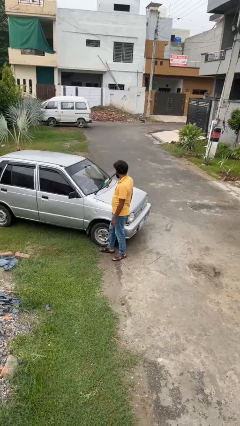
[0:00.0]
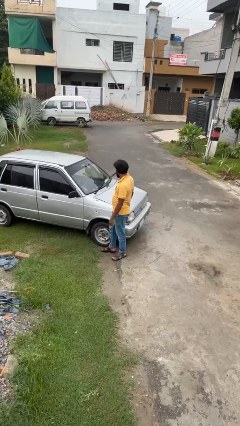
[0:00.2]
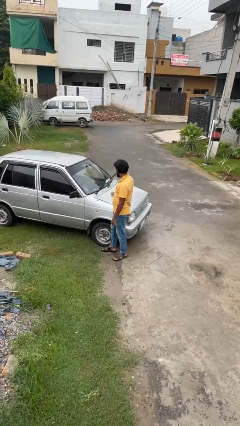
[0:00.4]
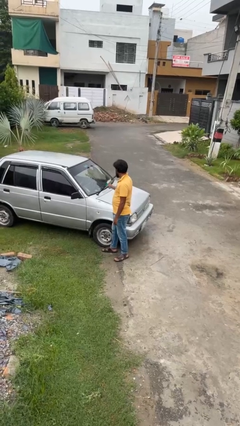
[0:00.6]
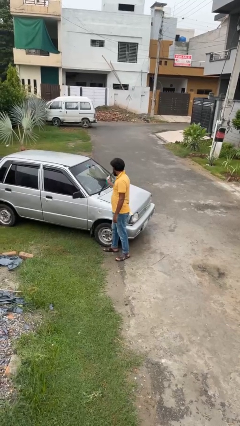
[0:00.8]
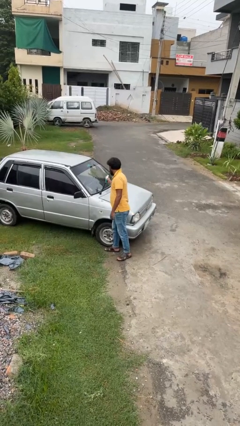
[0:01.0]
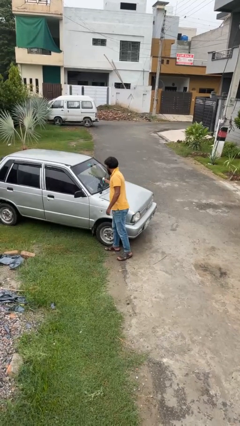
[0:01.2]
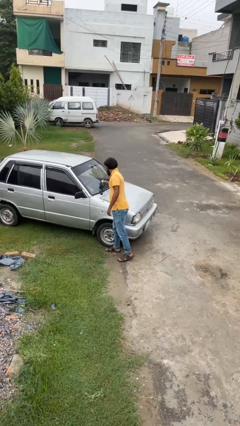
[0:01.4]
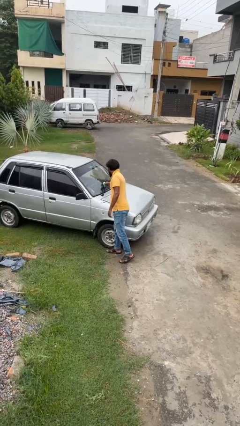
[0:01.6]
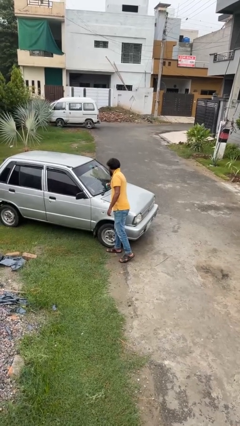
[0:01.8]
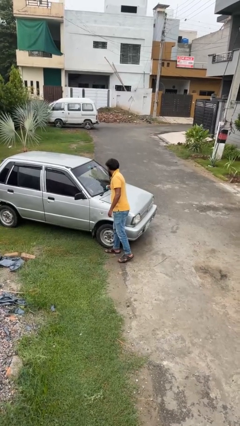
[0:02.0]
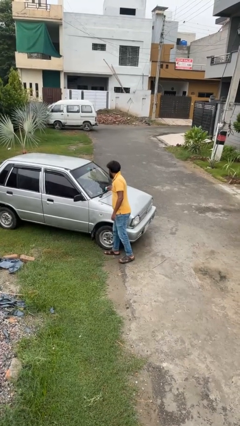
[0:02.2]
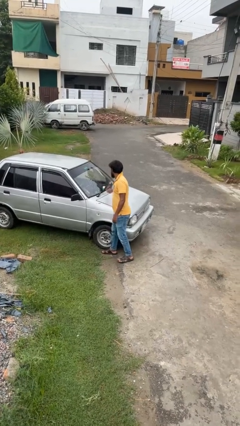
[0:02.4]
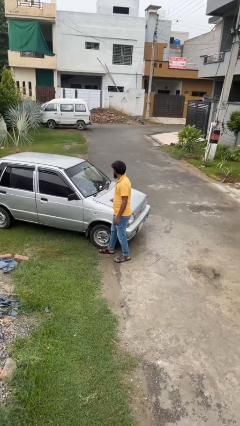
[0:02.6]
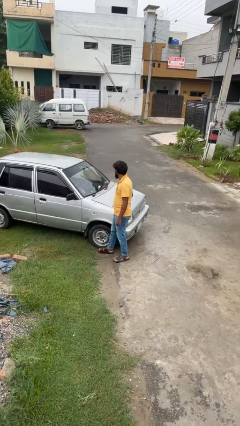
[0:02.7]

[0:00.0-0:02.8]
person flips down car wipers

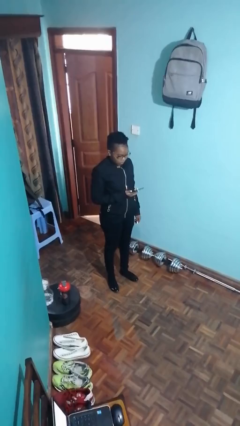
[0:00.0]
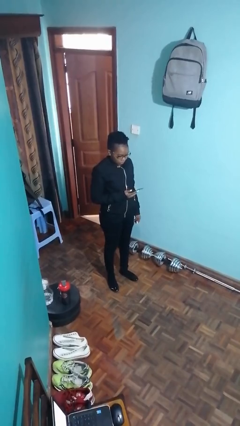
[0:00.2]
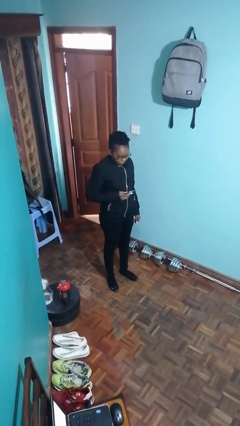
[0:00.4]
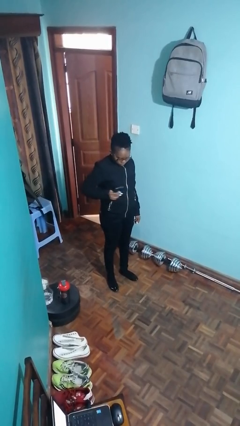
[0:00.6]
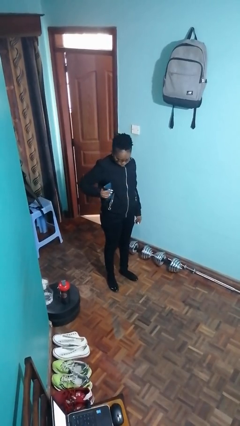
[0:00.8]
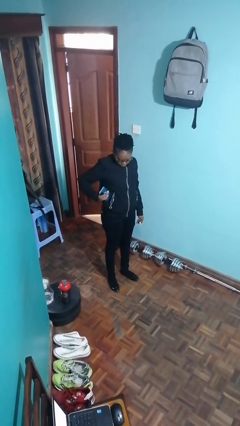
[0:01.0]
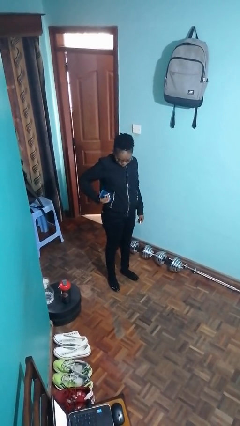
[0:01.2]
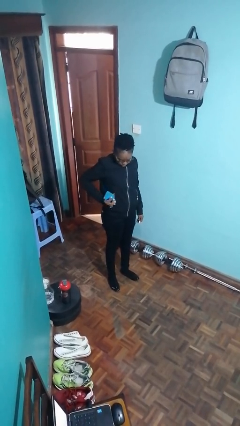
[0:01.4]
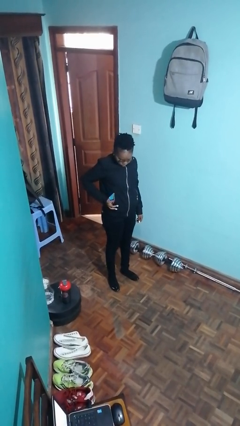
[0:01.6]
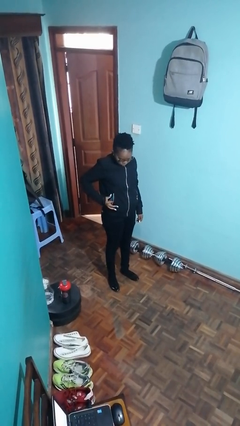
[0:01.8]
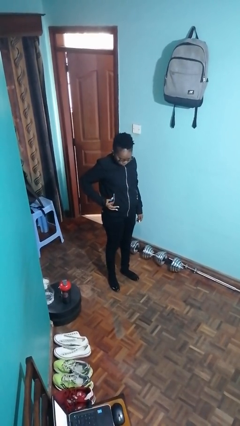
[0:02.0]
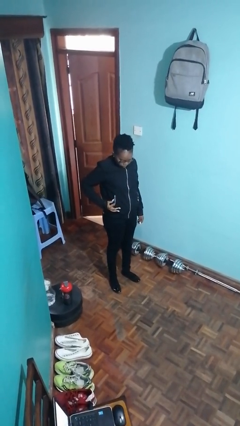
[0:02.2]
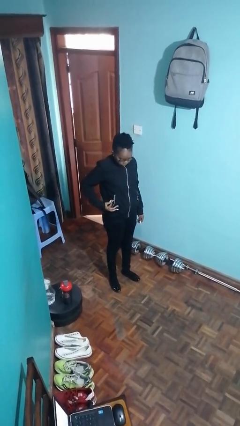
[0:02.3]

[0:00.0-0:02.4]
person puts phone into pocket

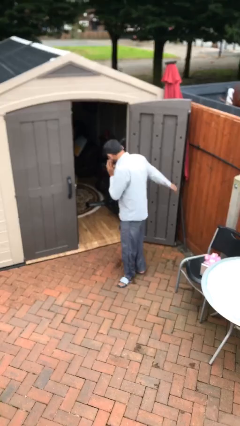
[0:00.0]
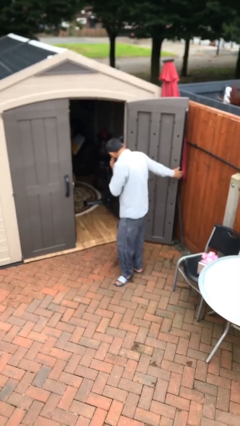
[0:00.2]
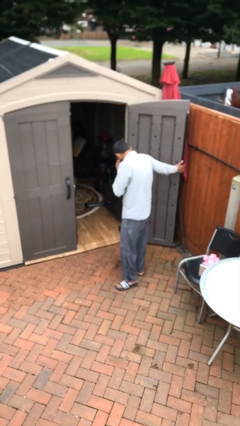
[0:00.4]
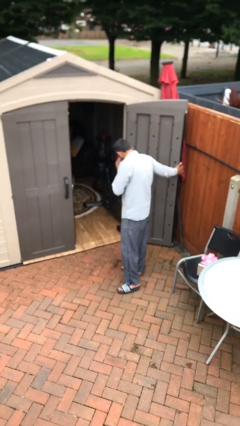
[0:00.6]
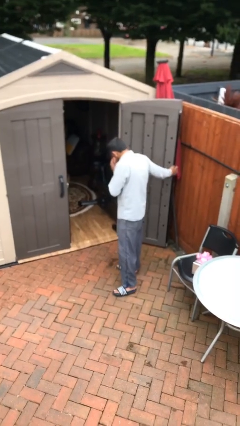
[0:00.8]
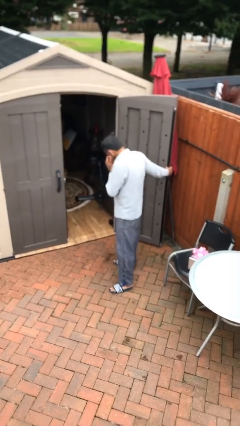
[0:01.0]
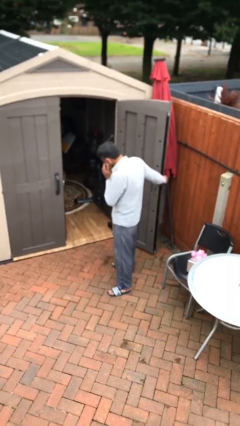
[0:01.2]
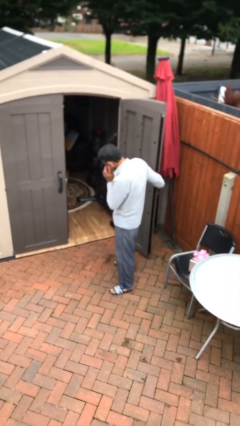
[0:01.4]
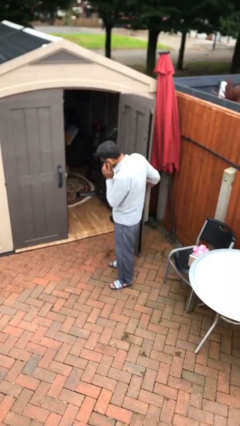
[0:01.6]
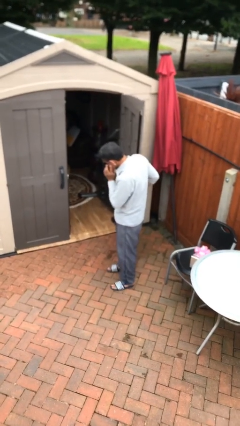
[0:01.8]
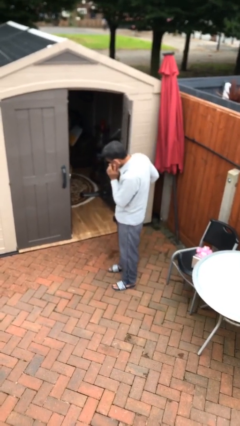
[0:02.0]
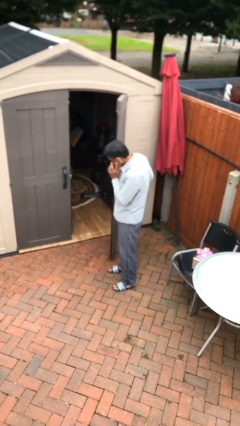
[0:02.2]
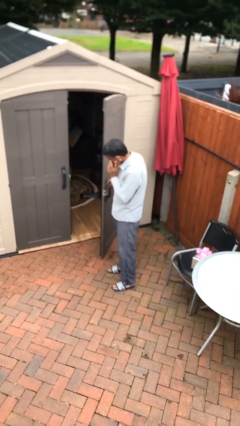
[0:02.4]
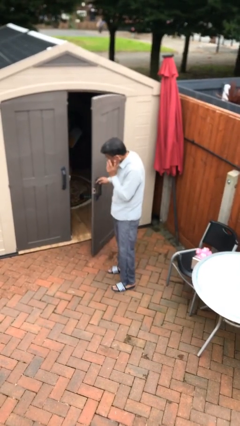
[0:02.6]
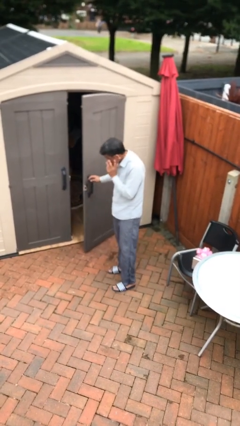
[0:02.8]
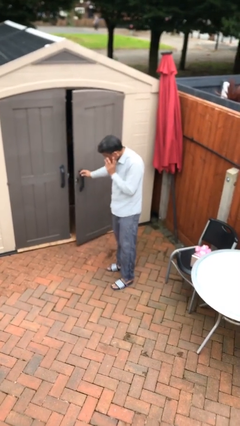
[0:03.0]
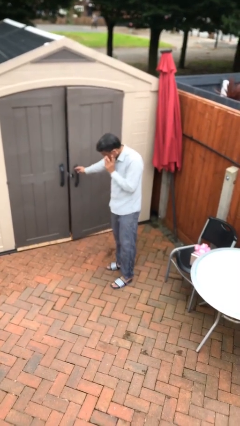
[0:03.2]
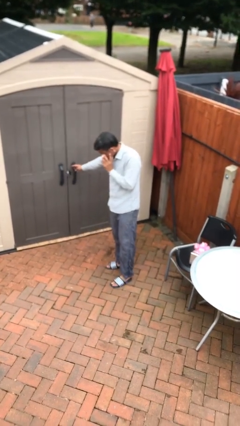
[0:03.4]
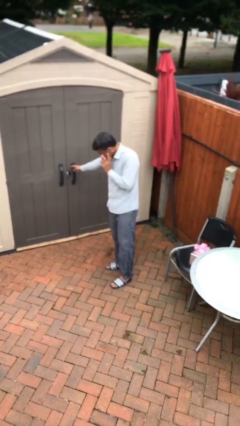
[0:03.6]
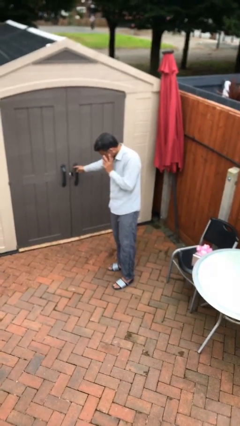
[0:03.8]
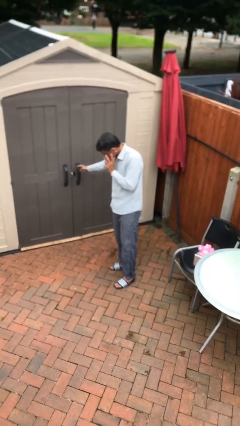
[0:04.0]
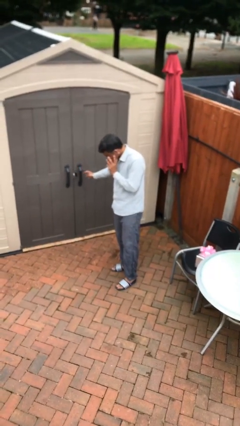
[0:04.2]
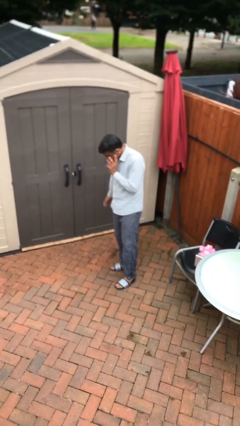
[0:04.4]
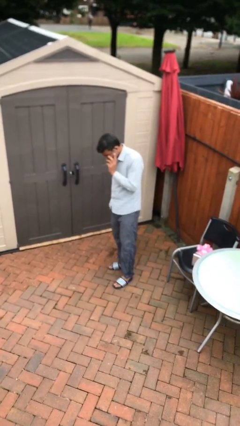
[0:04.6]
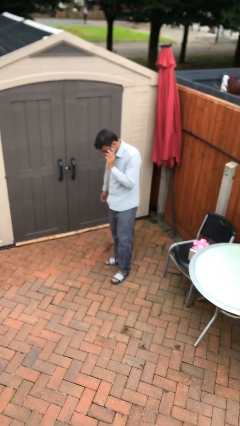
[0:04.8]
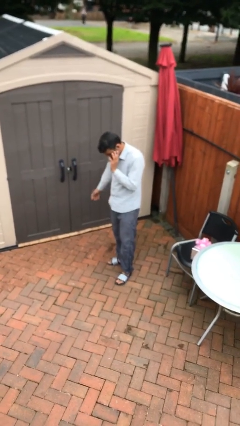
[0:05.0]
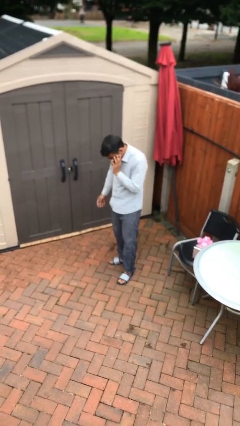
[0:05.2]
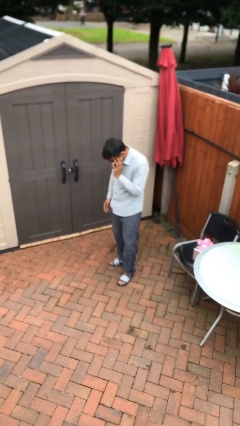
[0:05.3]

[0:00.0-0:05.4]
person closes facility door

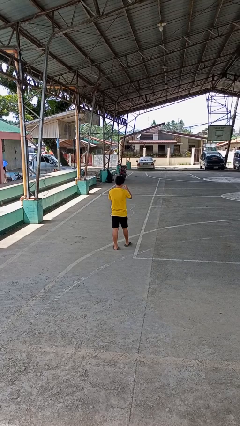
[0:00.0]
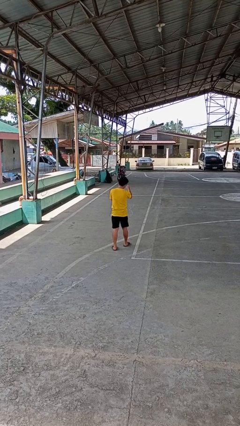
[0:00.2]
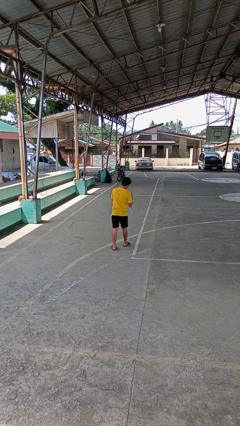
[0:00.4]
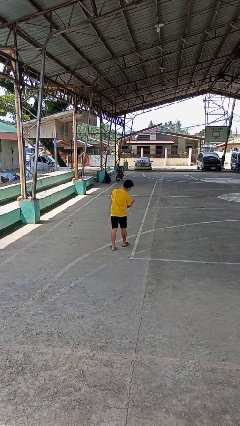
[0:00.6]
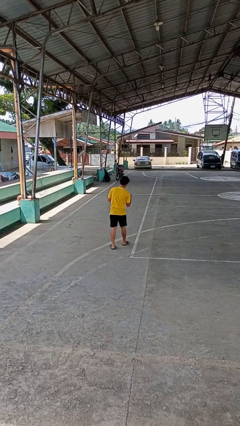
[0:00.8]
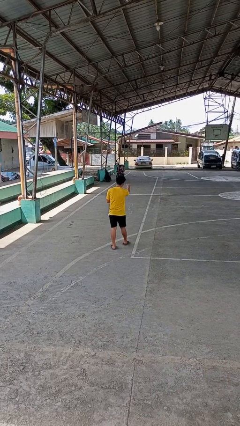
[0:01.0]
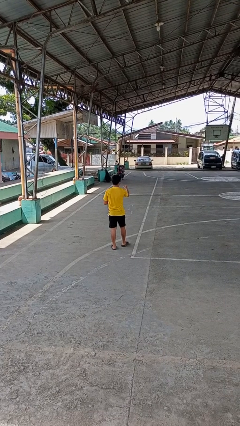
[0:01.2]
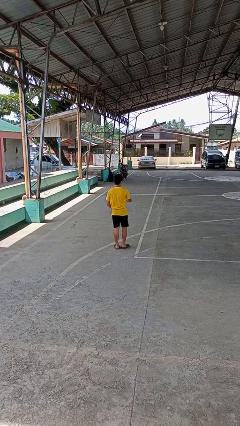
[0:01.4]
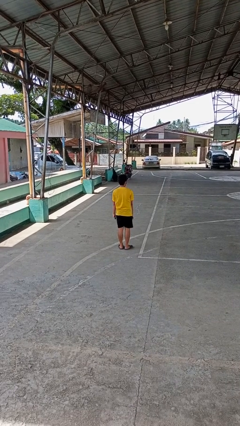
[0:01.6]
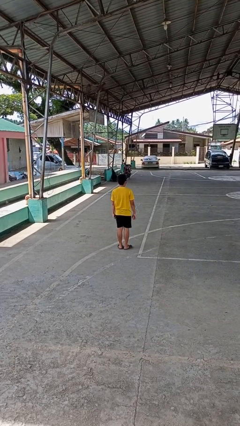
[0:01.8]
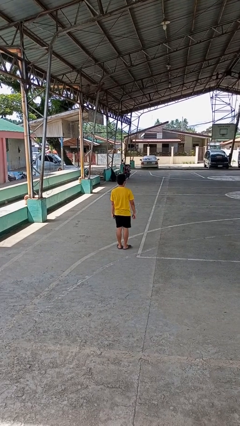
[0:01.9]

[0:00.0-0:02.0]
person punches

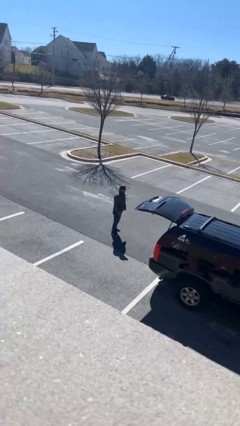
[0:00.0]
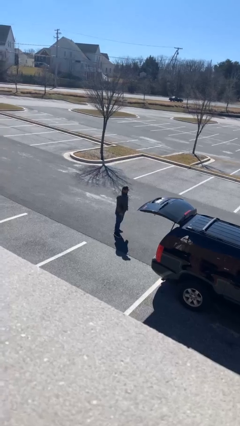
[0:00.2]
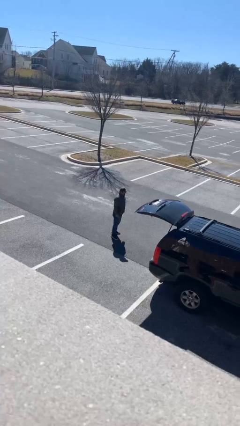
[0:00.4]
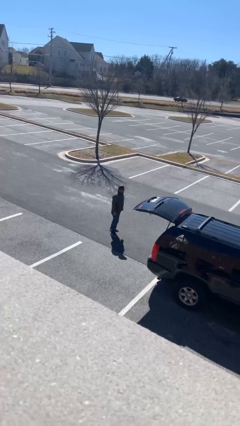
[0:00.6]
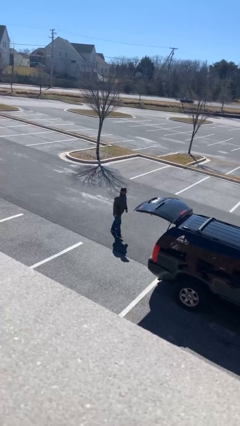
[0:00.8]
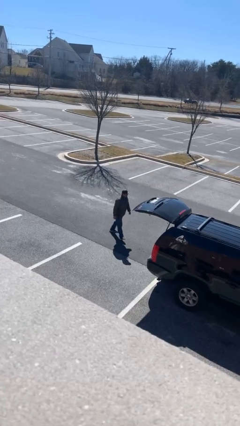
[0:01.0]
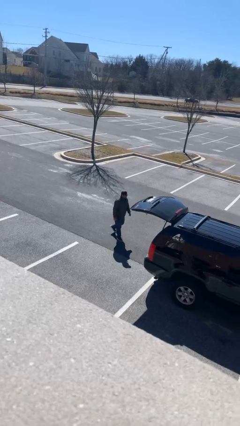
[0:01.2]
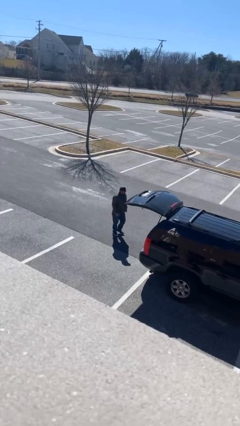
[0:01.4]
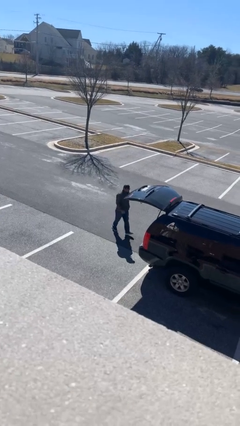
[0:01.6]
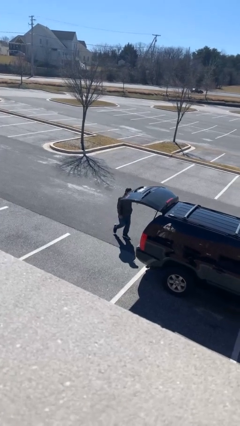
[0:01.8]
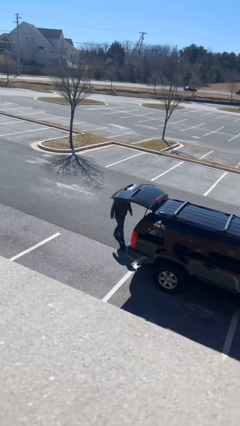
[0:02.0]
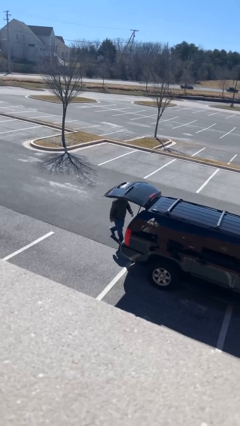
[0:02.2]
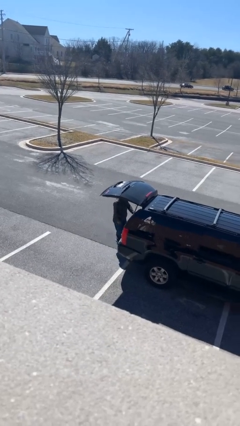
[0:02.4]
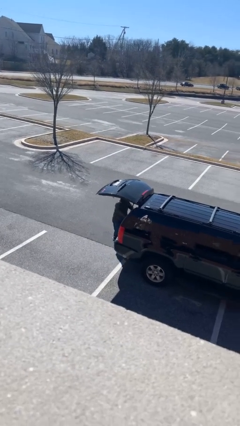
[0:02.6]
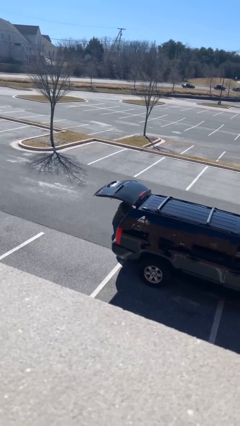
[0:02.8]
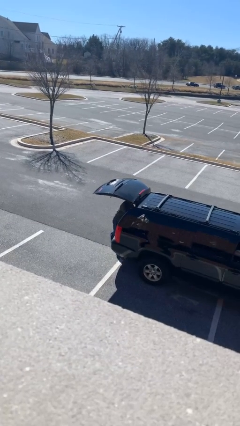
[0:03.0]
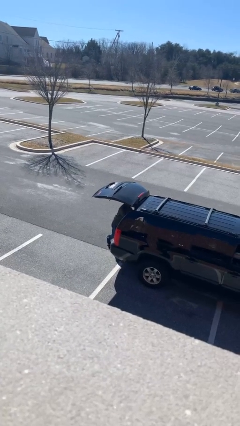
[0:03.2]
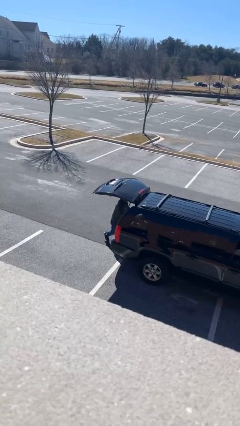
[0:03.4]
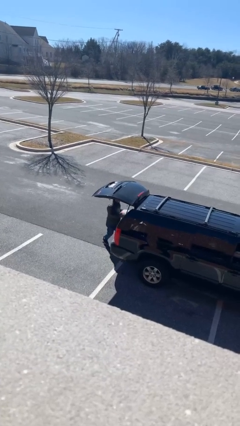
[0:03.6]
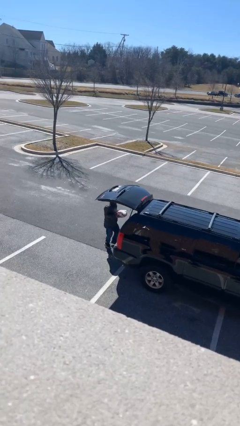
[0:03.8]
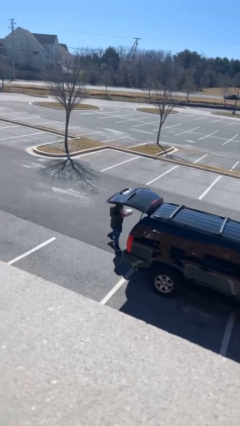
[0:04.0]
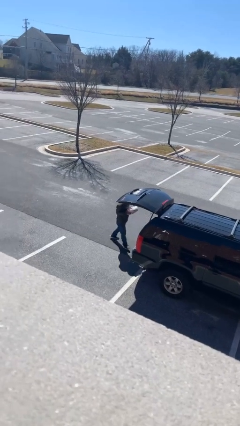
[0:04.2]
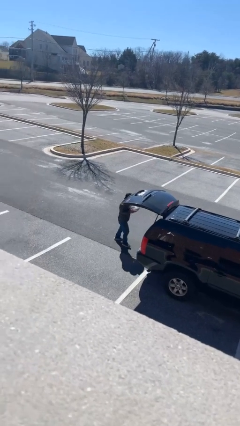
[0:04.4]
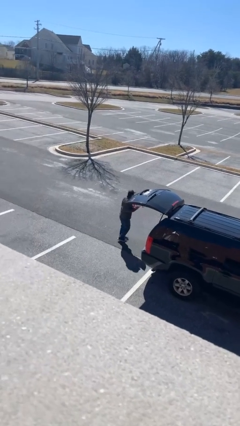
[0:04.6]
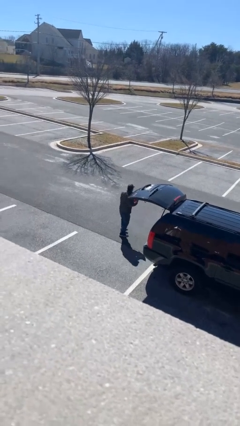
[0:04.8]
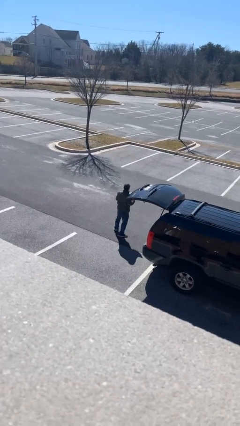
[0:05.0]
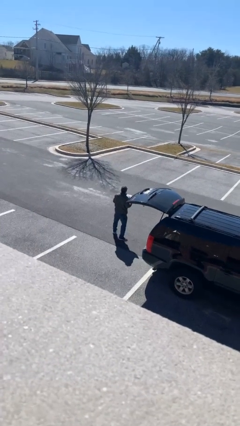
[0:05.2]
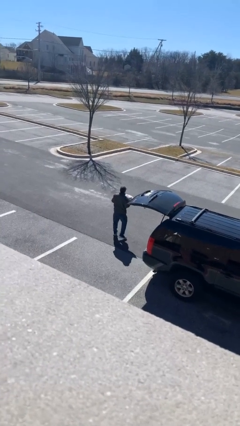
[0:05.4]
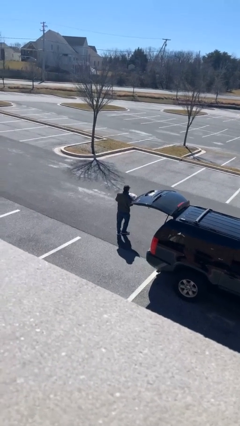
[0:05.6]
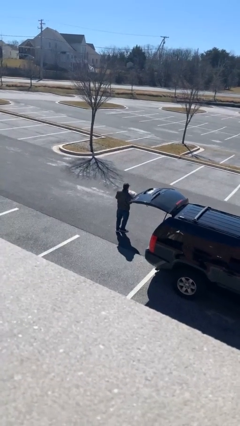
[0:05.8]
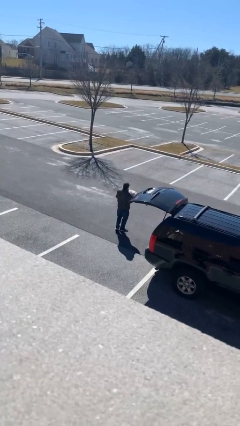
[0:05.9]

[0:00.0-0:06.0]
person unloads car
